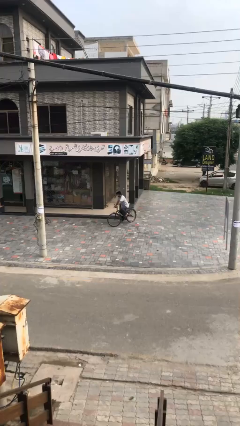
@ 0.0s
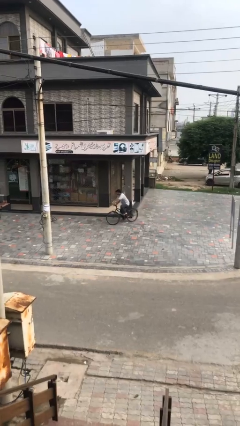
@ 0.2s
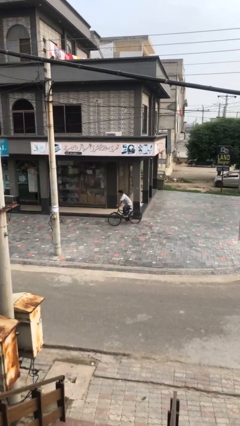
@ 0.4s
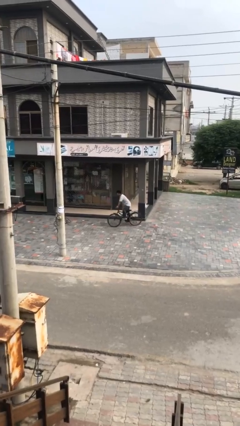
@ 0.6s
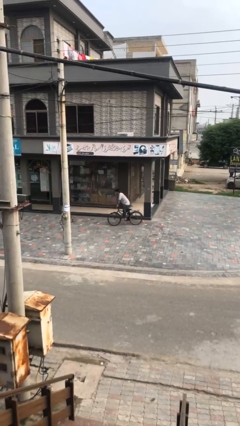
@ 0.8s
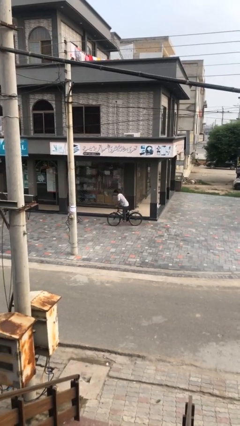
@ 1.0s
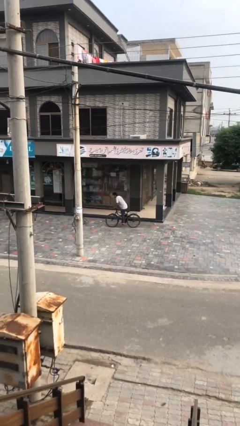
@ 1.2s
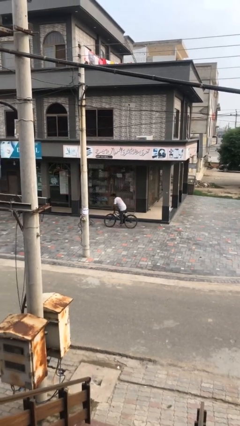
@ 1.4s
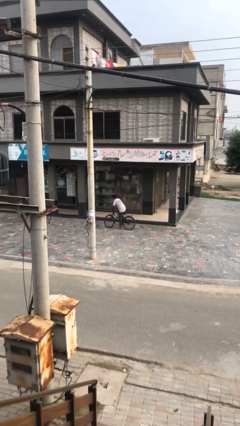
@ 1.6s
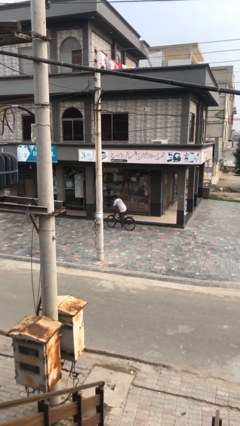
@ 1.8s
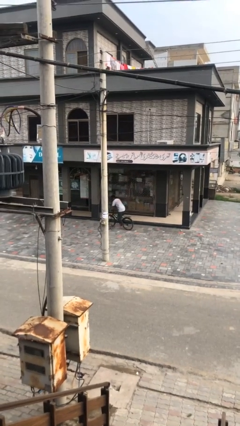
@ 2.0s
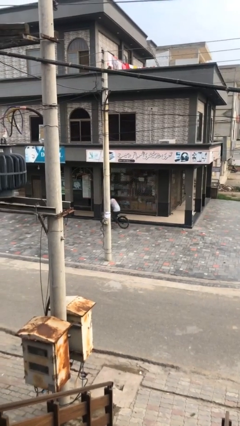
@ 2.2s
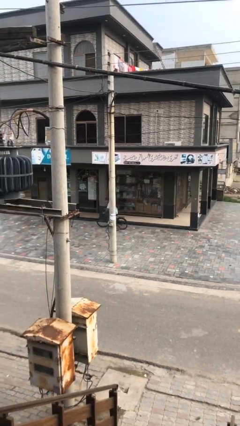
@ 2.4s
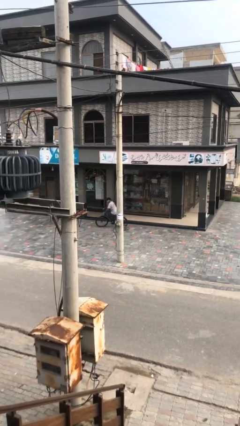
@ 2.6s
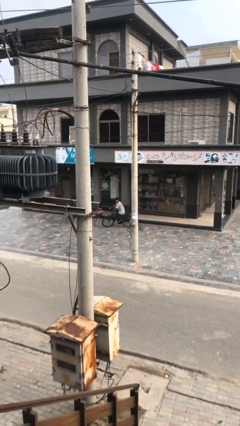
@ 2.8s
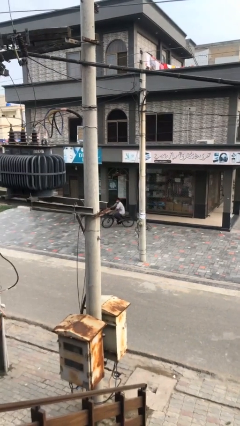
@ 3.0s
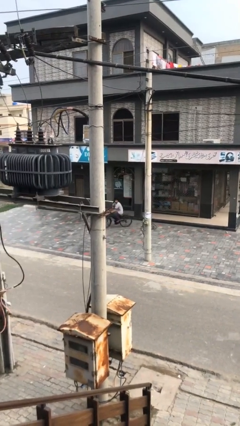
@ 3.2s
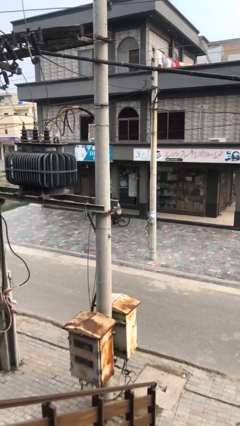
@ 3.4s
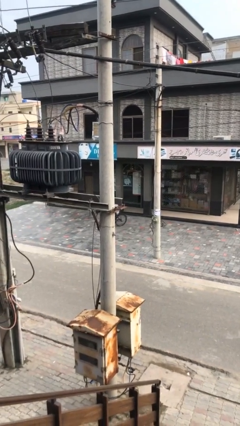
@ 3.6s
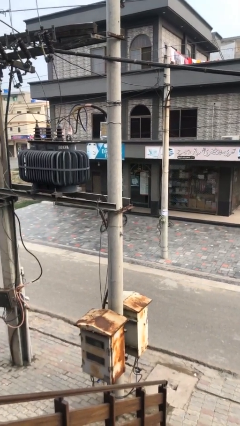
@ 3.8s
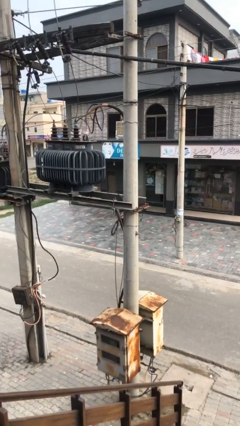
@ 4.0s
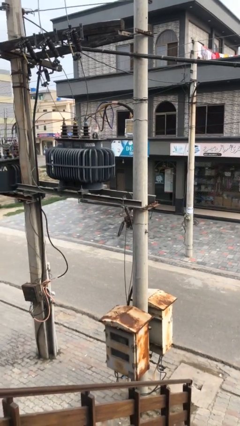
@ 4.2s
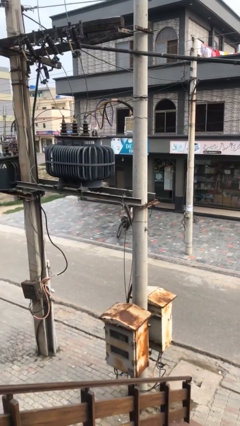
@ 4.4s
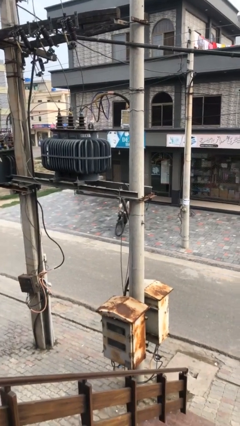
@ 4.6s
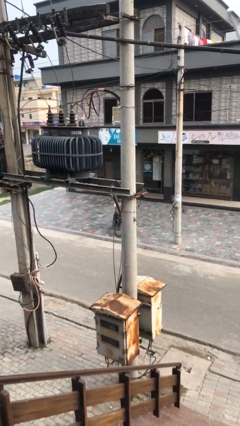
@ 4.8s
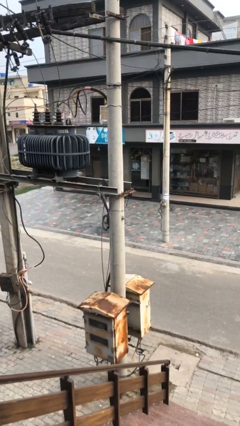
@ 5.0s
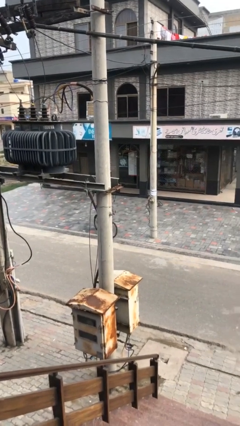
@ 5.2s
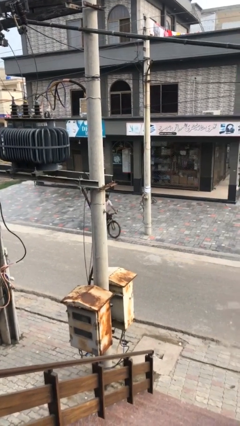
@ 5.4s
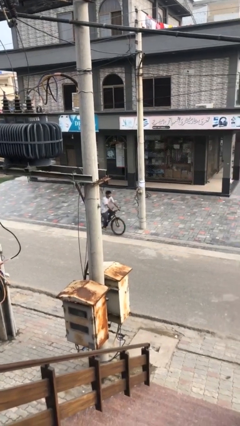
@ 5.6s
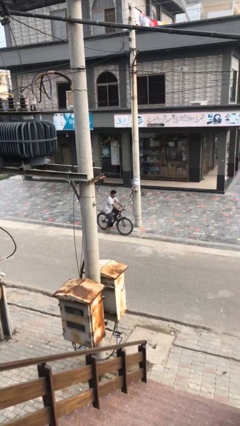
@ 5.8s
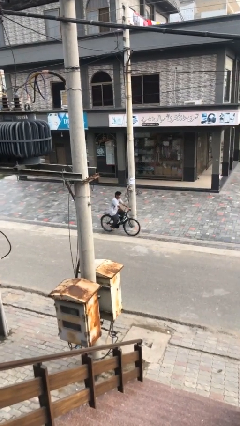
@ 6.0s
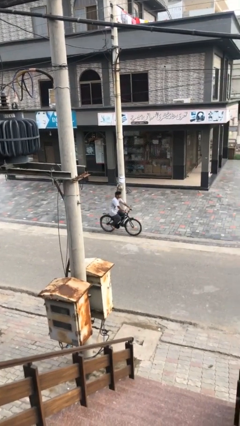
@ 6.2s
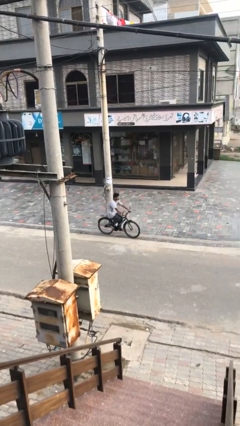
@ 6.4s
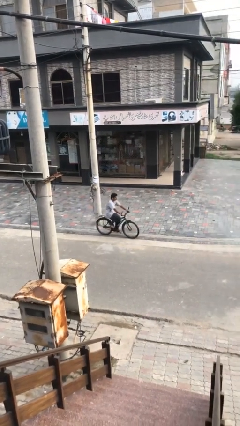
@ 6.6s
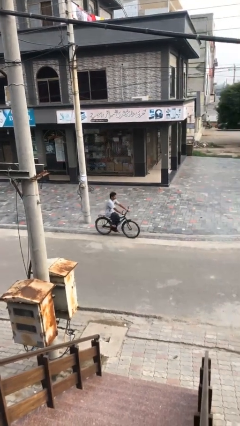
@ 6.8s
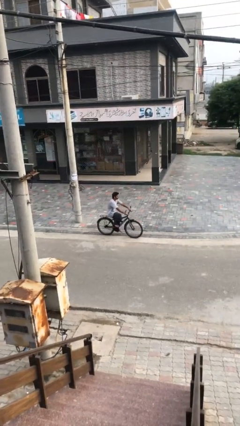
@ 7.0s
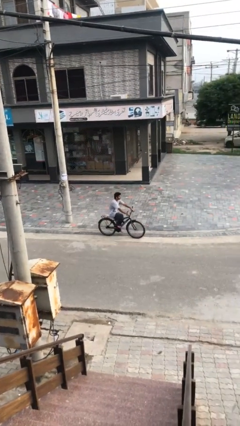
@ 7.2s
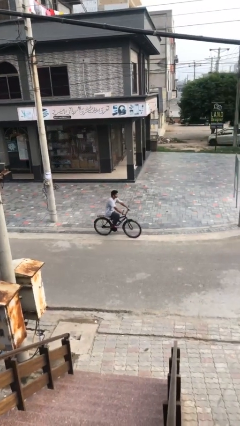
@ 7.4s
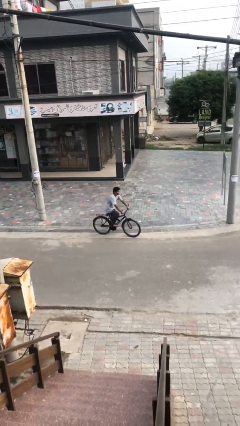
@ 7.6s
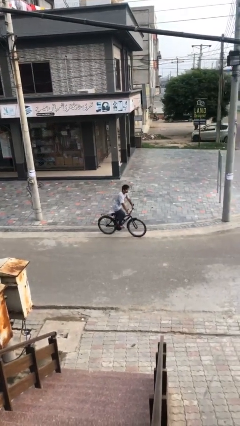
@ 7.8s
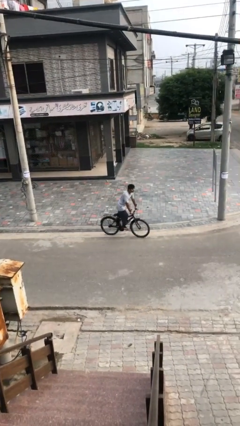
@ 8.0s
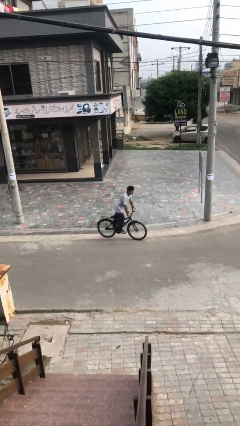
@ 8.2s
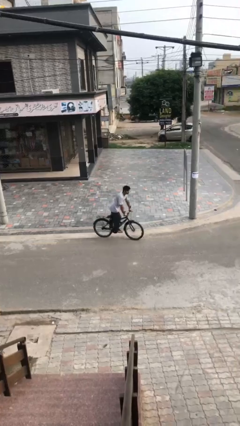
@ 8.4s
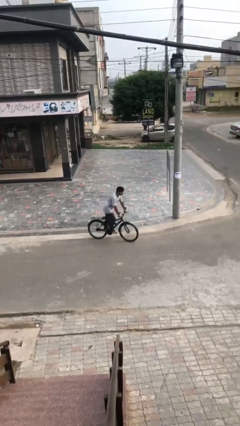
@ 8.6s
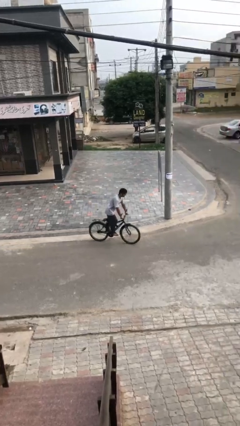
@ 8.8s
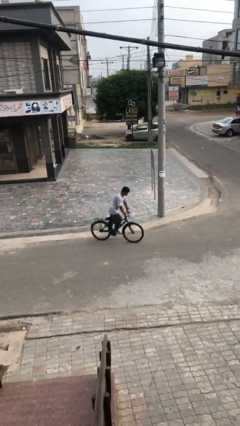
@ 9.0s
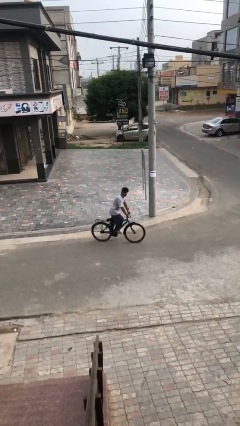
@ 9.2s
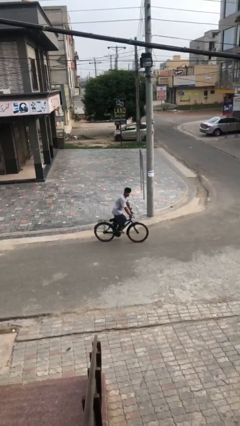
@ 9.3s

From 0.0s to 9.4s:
person rides bicycle

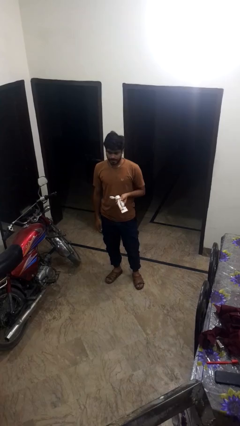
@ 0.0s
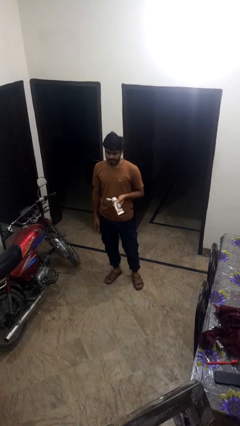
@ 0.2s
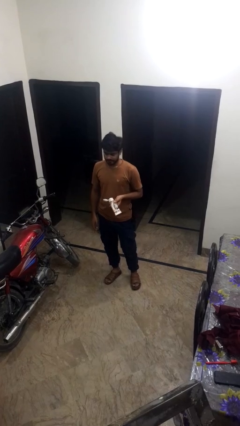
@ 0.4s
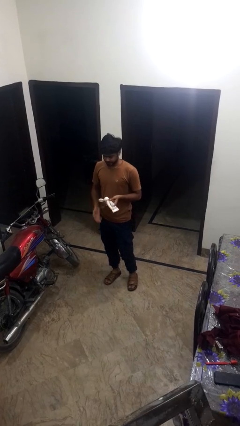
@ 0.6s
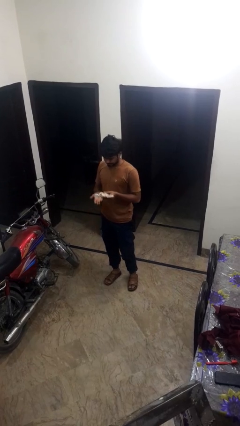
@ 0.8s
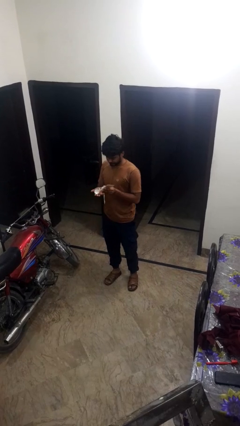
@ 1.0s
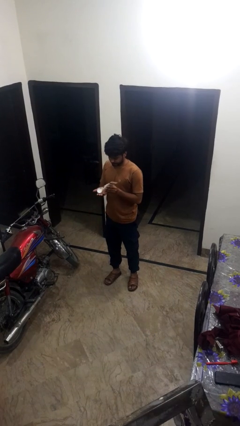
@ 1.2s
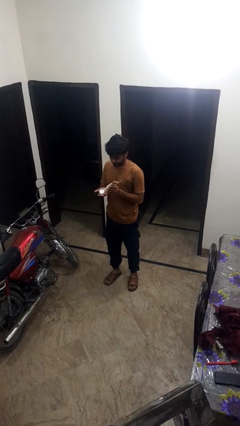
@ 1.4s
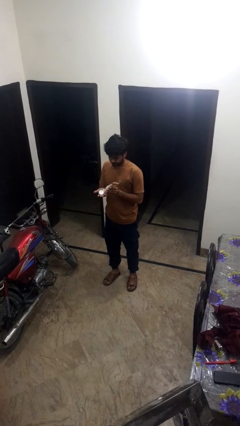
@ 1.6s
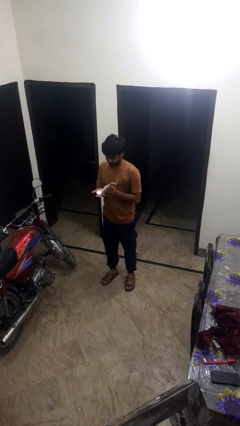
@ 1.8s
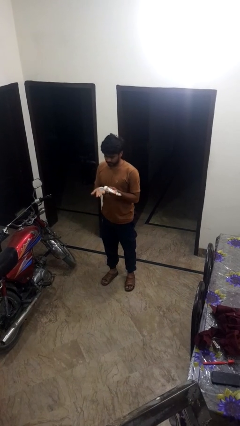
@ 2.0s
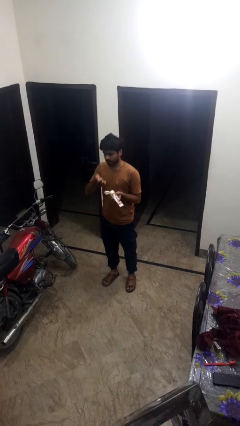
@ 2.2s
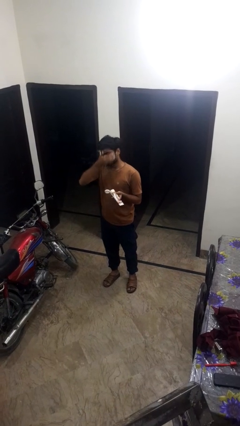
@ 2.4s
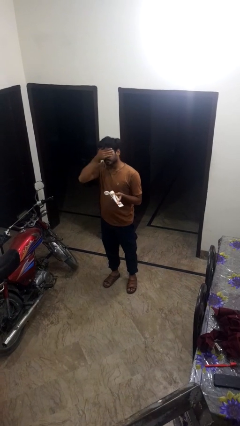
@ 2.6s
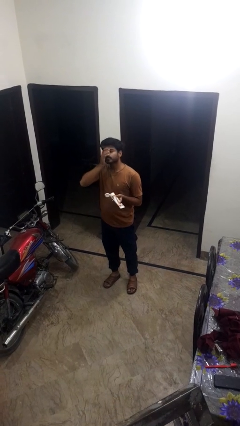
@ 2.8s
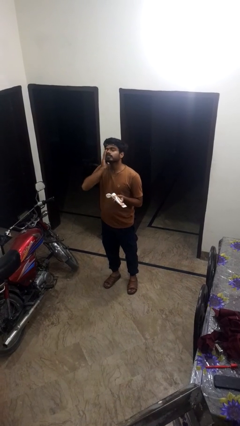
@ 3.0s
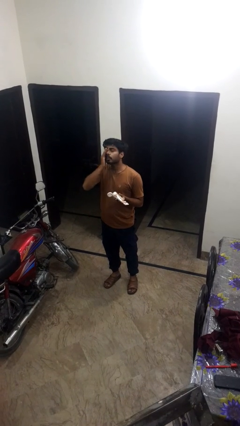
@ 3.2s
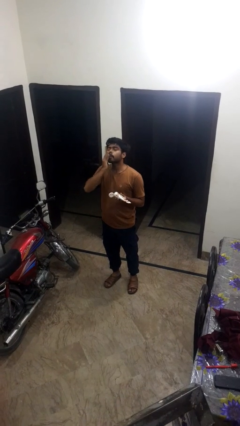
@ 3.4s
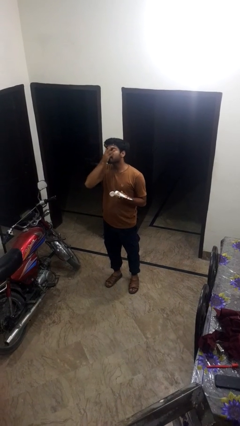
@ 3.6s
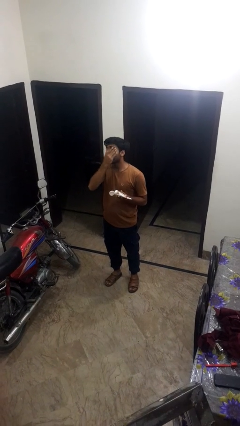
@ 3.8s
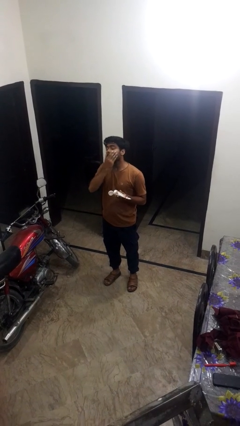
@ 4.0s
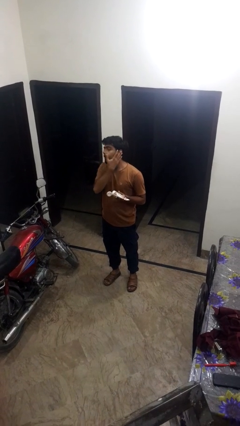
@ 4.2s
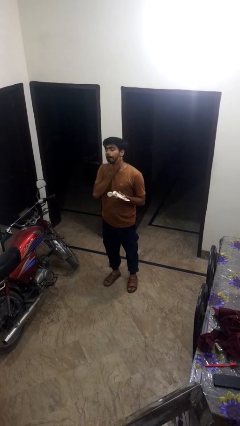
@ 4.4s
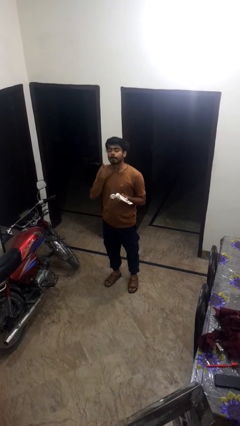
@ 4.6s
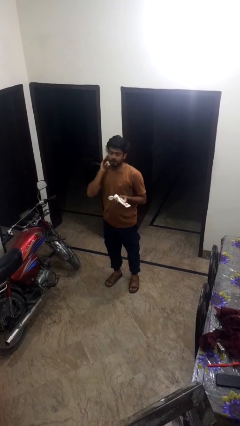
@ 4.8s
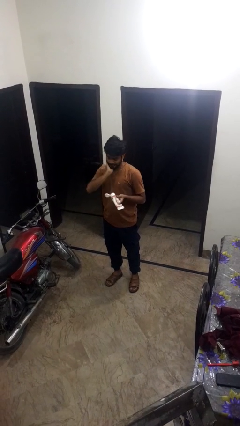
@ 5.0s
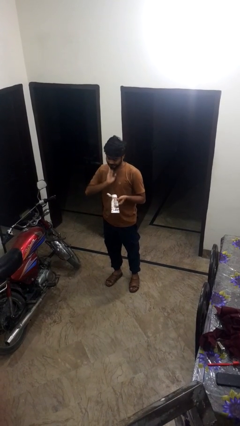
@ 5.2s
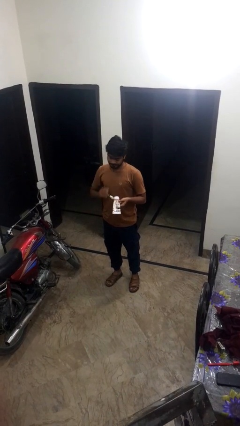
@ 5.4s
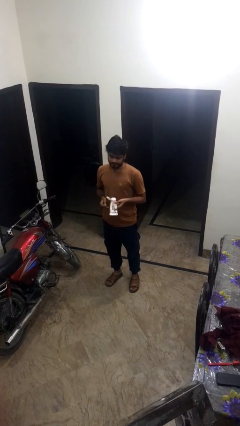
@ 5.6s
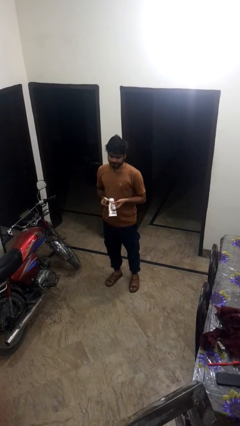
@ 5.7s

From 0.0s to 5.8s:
person applies sunscreen

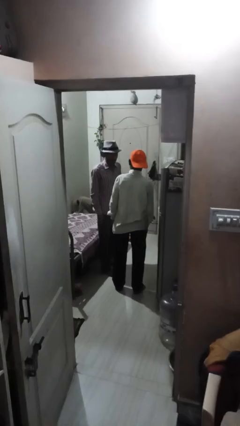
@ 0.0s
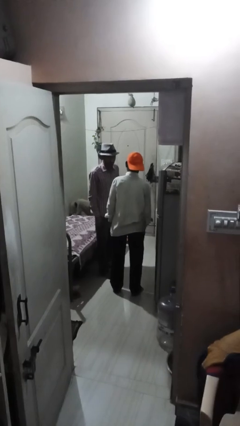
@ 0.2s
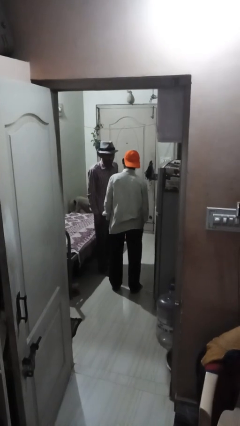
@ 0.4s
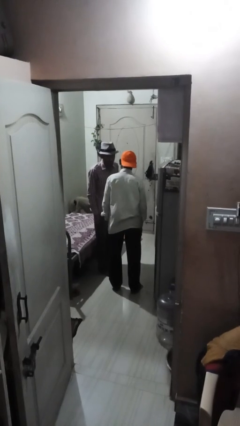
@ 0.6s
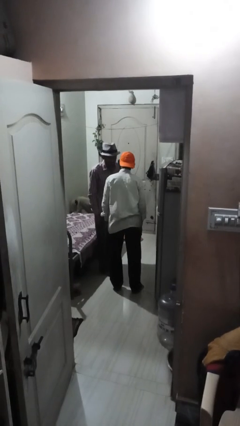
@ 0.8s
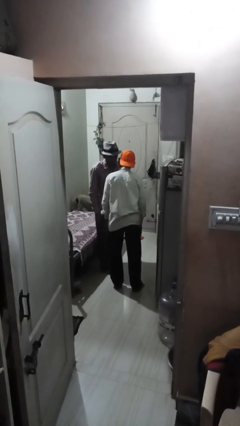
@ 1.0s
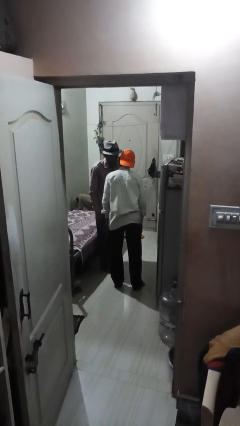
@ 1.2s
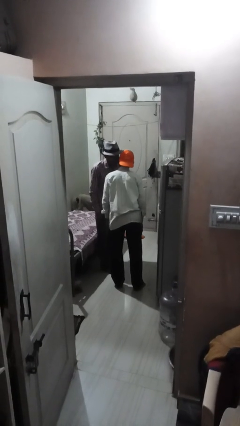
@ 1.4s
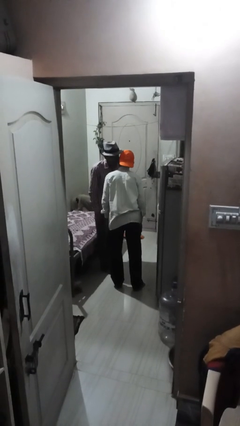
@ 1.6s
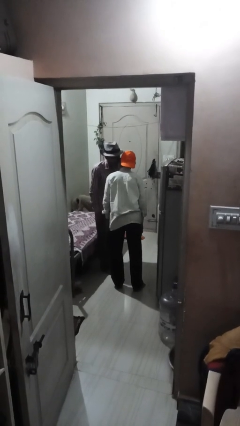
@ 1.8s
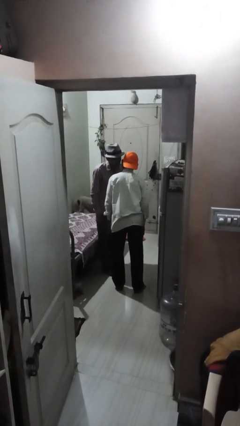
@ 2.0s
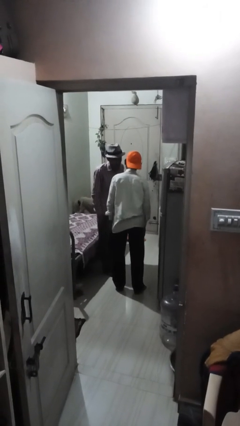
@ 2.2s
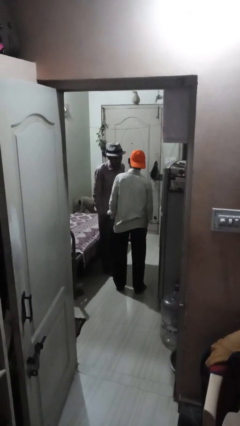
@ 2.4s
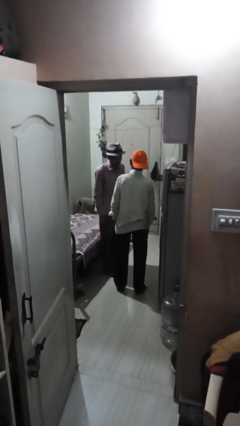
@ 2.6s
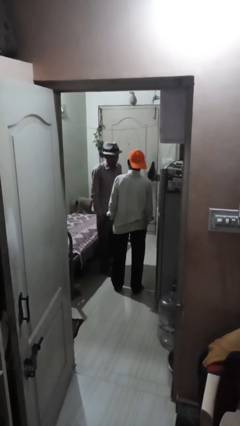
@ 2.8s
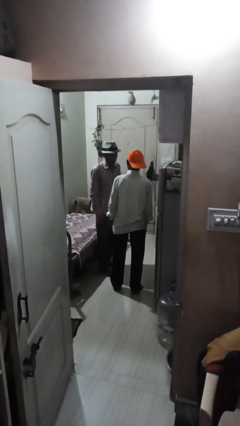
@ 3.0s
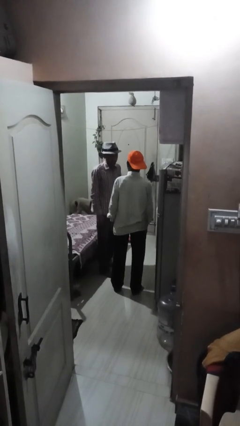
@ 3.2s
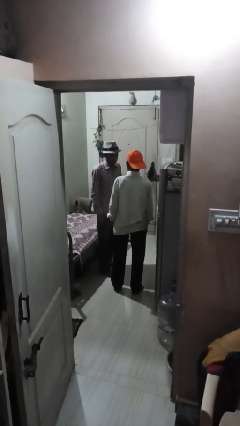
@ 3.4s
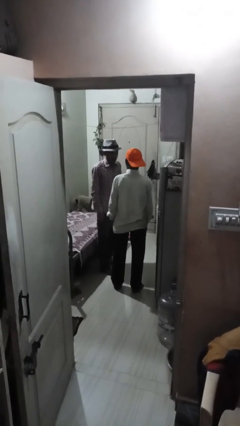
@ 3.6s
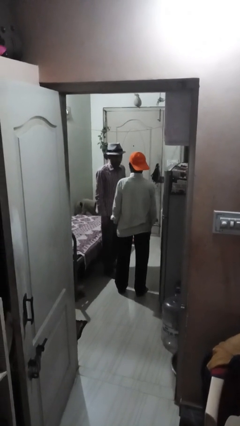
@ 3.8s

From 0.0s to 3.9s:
person kisses cheek of person
